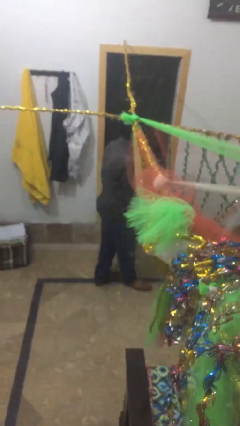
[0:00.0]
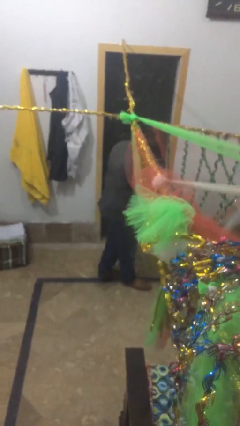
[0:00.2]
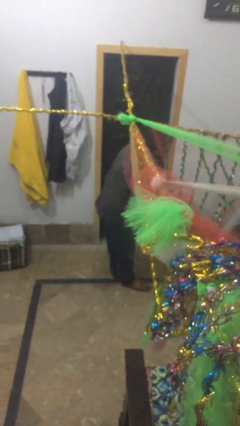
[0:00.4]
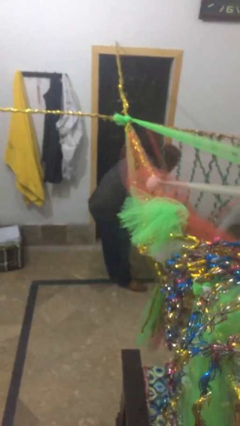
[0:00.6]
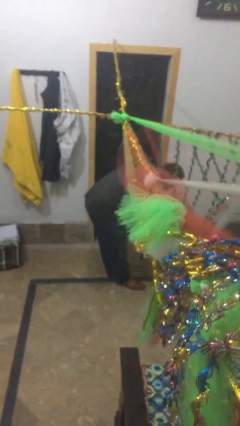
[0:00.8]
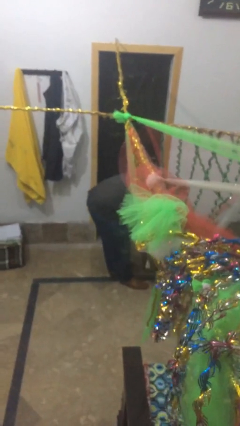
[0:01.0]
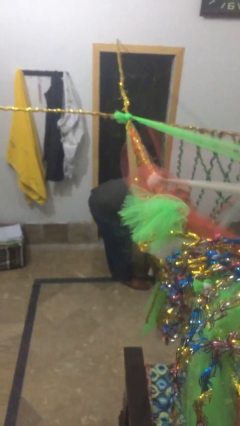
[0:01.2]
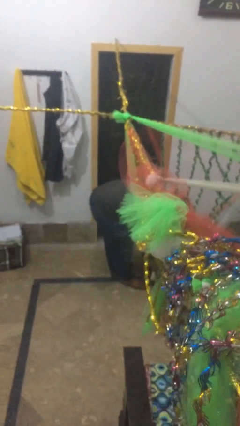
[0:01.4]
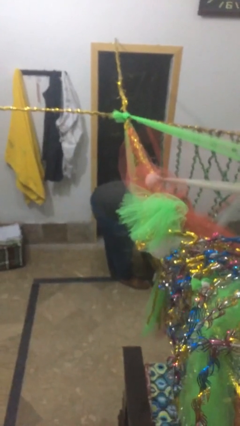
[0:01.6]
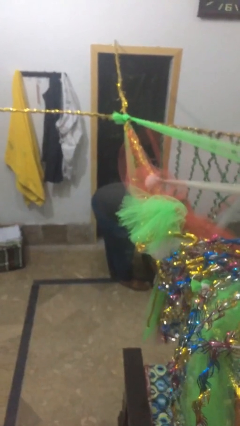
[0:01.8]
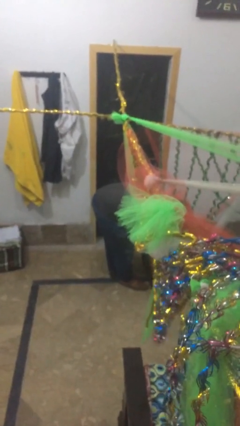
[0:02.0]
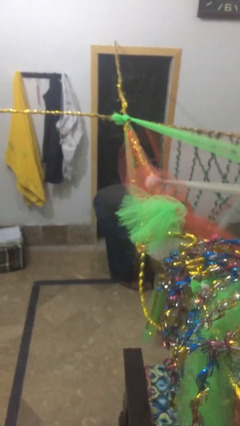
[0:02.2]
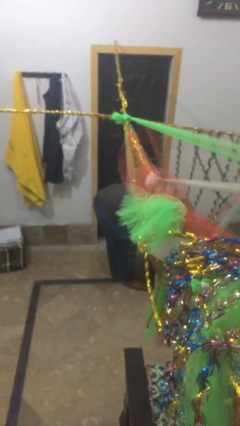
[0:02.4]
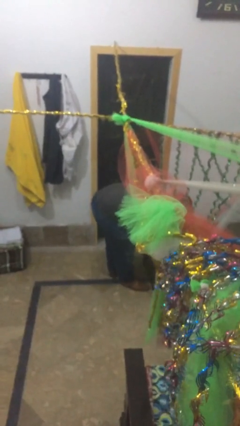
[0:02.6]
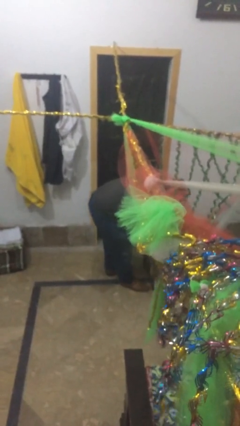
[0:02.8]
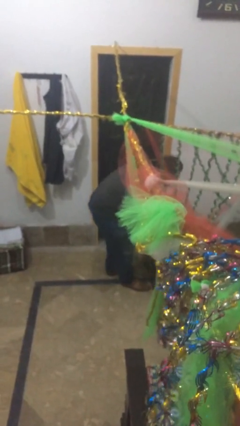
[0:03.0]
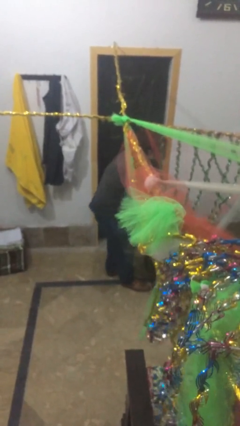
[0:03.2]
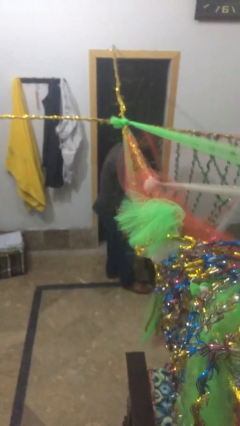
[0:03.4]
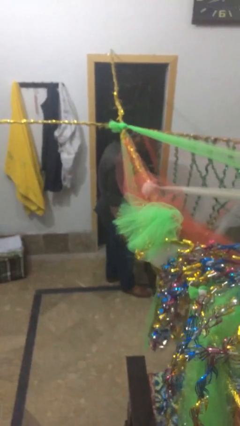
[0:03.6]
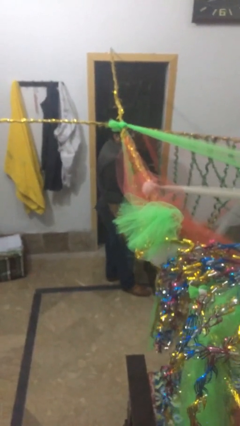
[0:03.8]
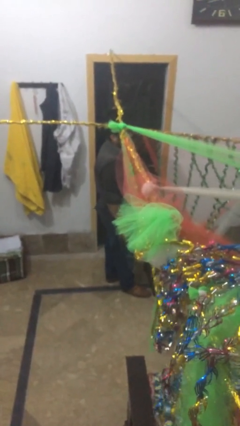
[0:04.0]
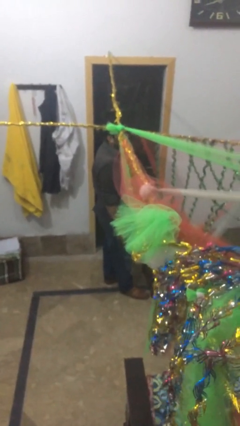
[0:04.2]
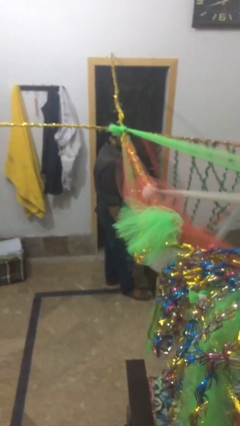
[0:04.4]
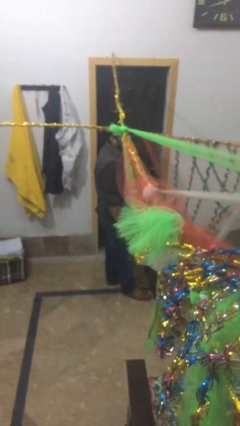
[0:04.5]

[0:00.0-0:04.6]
person puts down object on floor

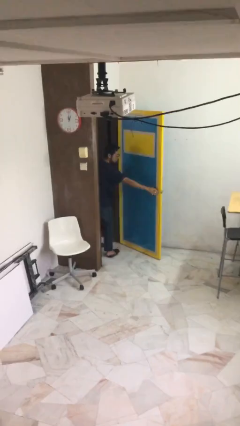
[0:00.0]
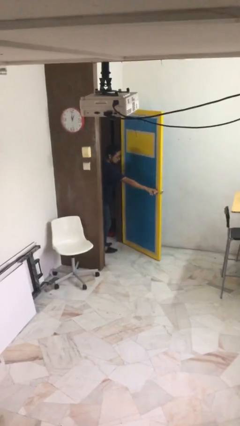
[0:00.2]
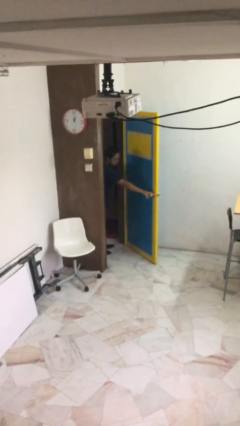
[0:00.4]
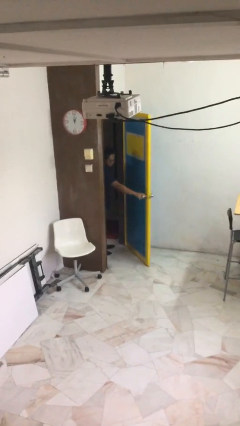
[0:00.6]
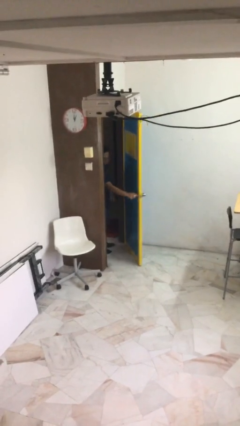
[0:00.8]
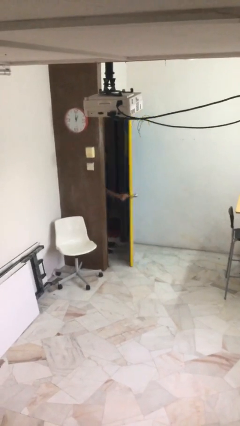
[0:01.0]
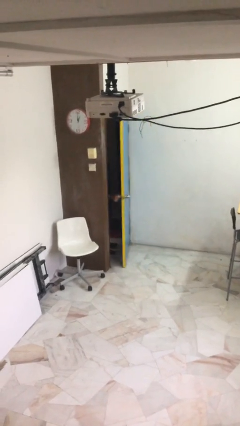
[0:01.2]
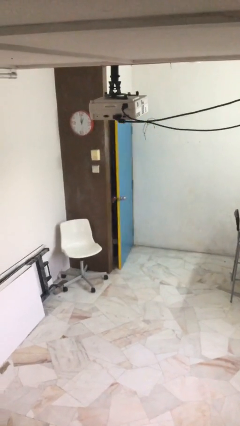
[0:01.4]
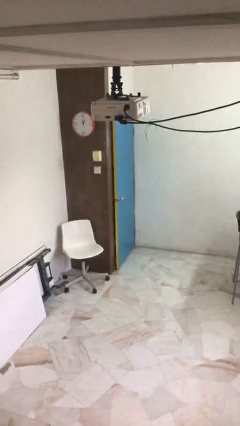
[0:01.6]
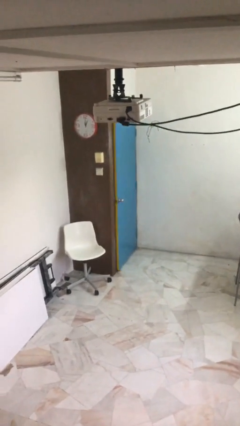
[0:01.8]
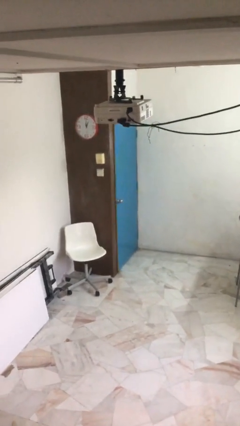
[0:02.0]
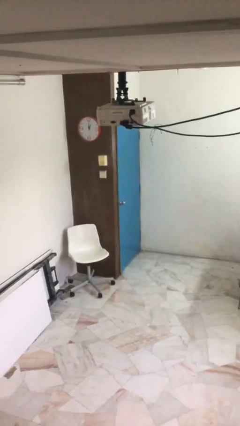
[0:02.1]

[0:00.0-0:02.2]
person closes facility door

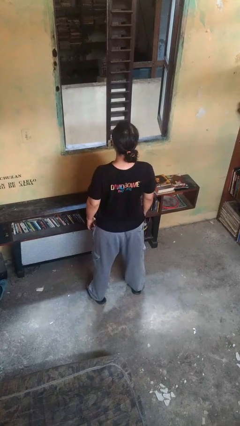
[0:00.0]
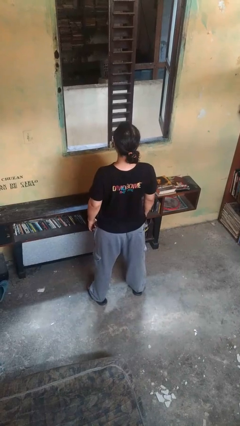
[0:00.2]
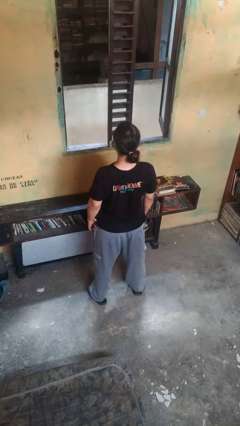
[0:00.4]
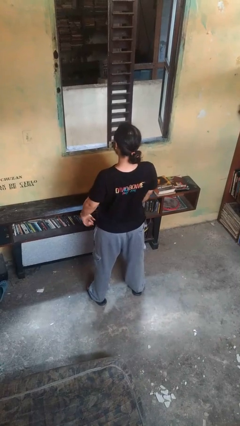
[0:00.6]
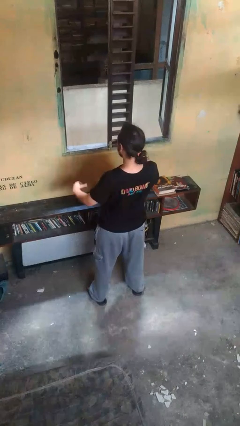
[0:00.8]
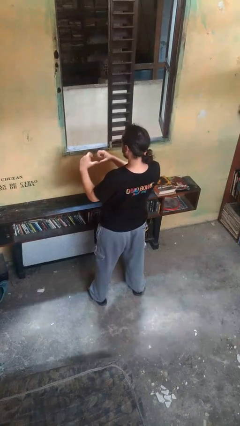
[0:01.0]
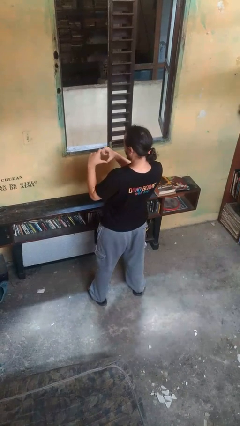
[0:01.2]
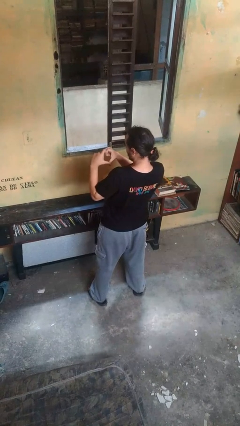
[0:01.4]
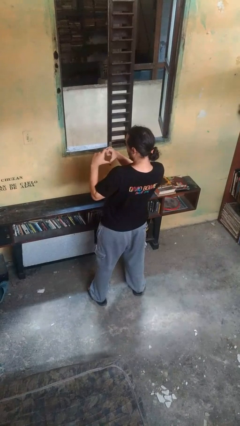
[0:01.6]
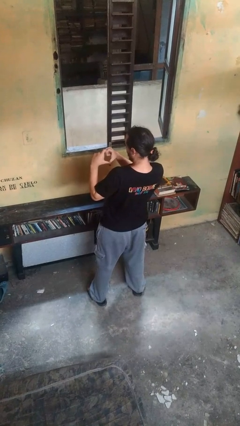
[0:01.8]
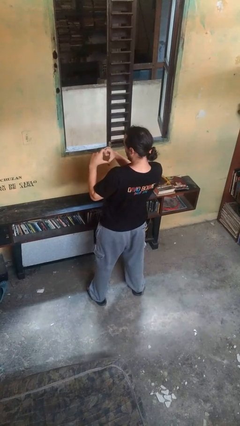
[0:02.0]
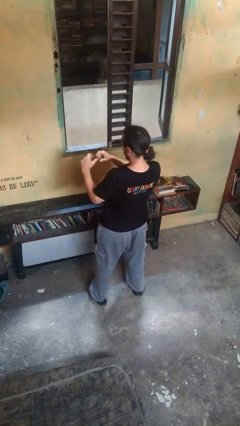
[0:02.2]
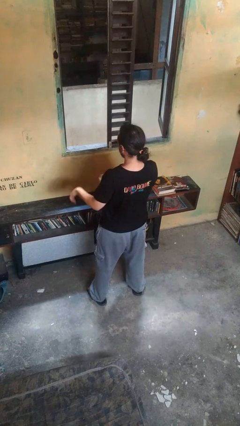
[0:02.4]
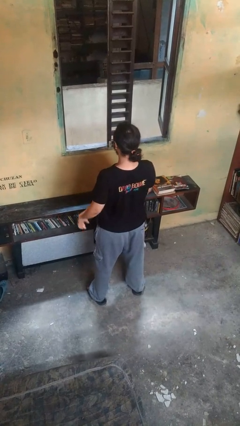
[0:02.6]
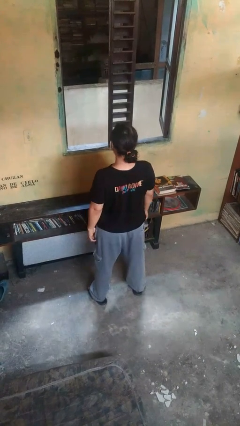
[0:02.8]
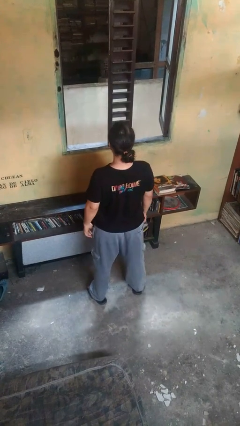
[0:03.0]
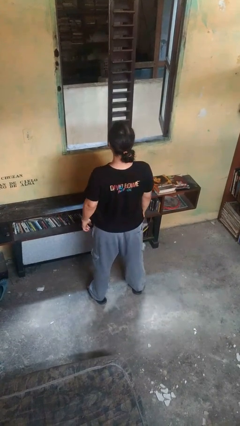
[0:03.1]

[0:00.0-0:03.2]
person gestures heart

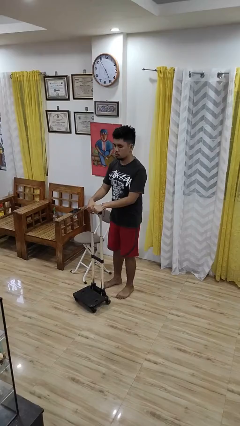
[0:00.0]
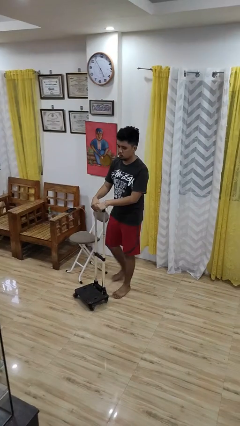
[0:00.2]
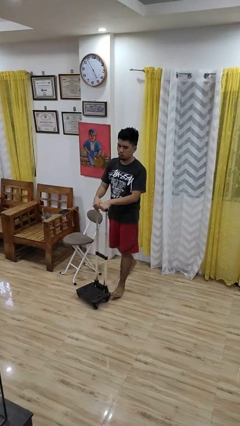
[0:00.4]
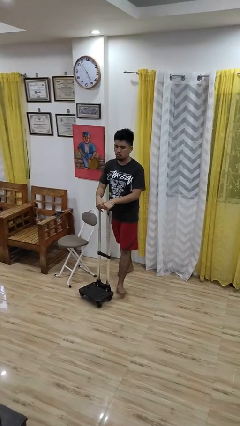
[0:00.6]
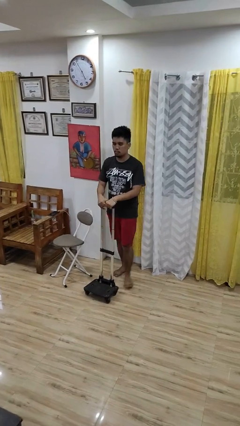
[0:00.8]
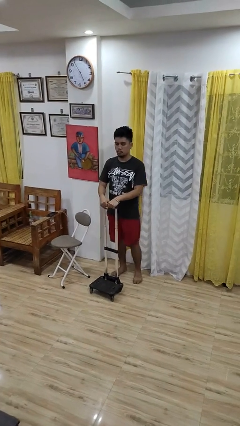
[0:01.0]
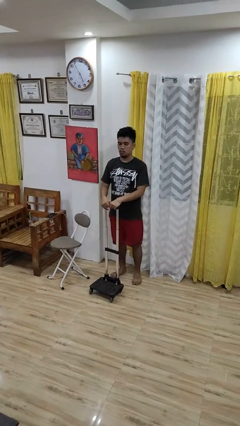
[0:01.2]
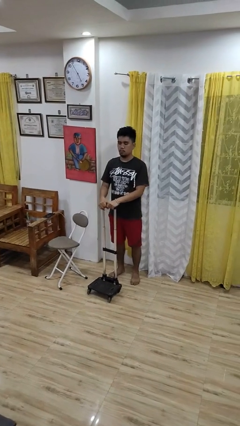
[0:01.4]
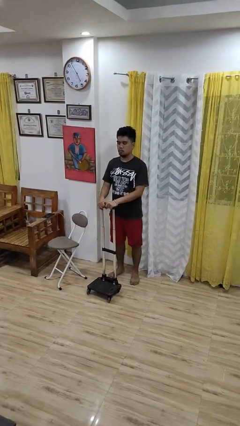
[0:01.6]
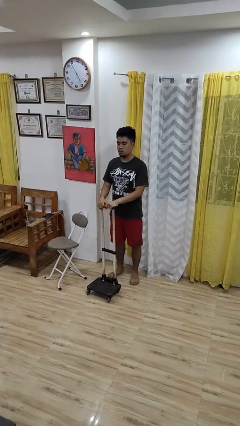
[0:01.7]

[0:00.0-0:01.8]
person pulls wheeled cart

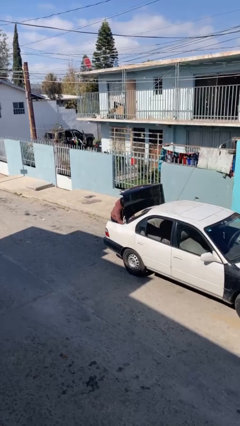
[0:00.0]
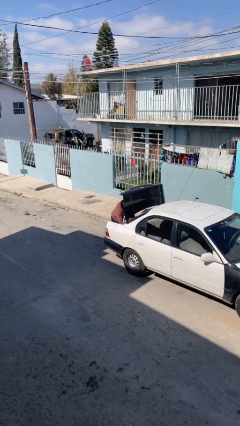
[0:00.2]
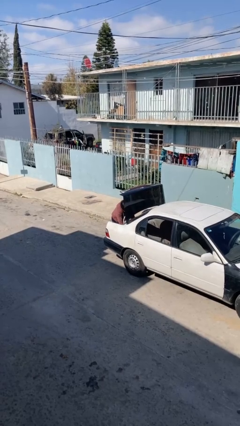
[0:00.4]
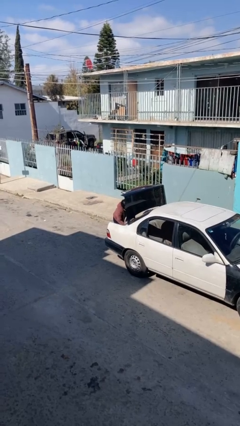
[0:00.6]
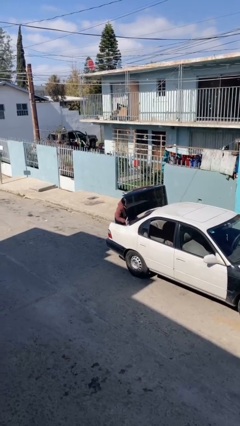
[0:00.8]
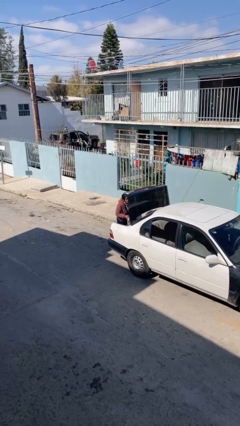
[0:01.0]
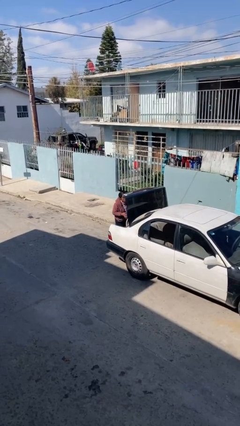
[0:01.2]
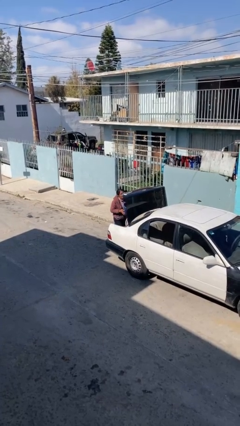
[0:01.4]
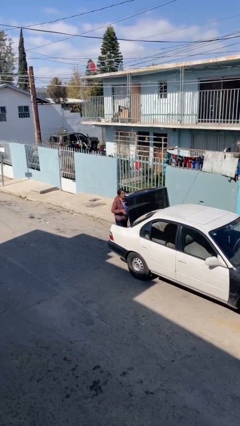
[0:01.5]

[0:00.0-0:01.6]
person unloads car

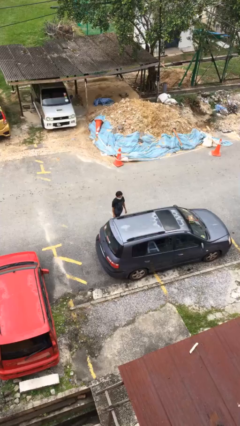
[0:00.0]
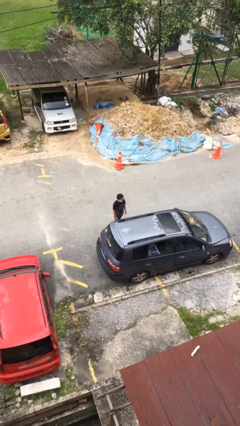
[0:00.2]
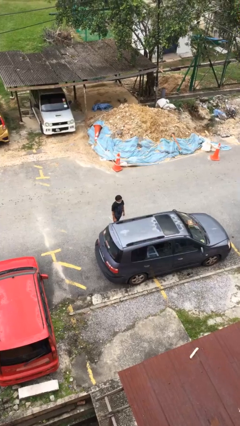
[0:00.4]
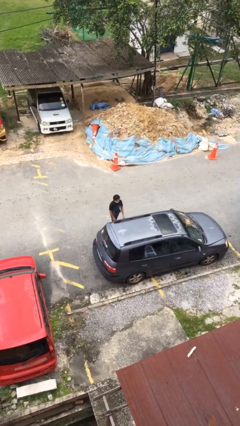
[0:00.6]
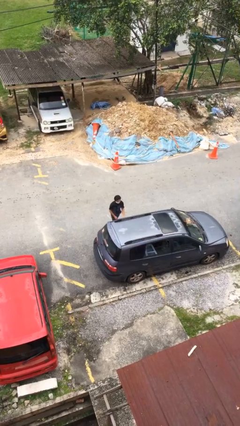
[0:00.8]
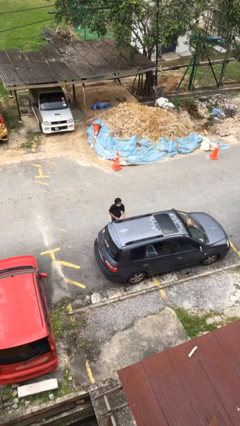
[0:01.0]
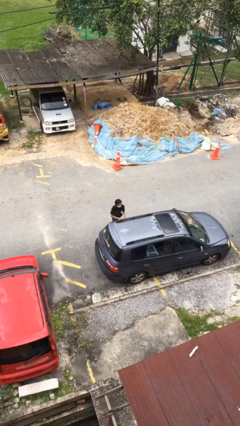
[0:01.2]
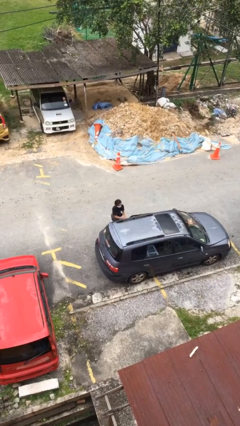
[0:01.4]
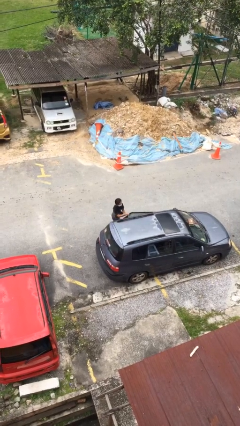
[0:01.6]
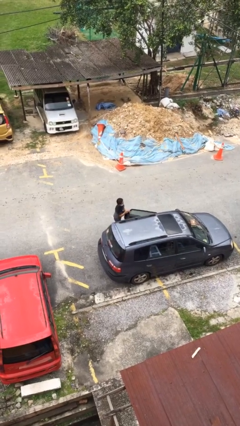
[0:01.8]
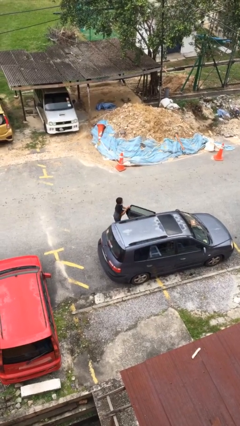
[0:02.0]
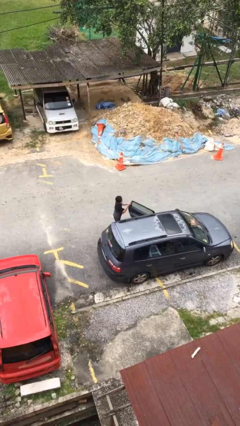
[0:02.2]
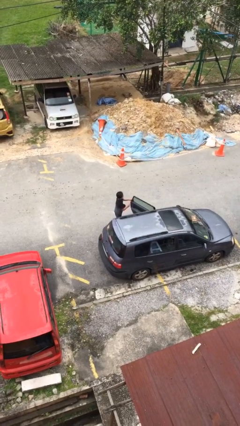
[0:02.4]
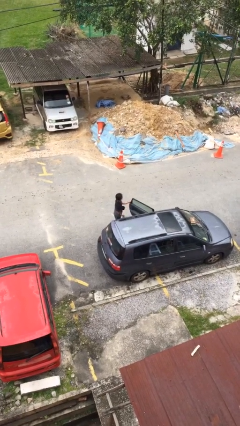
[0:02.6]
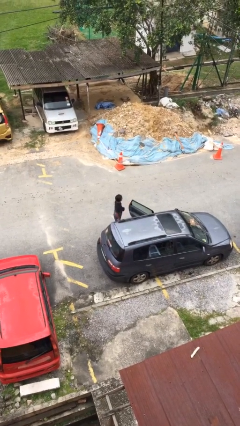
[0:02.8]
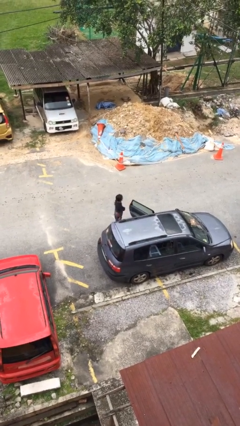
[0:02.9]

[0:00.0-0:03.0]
person opens car door

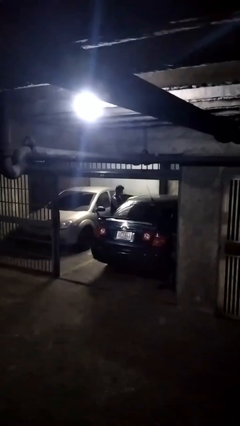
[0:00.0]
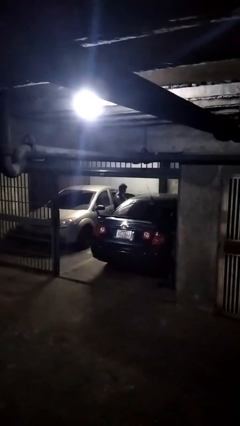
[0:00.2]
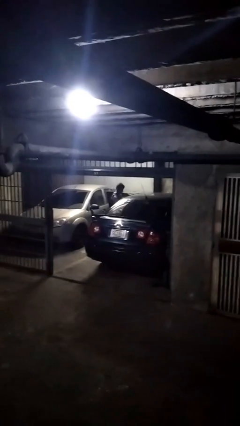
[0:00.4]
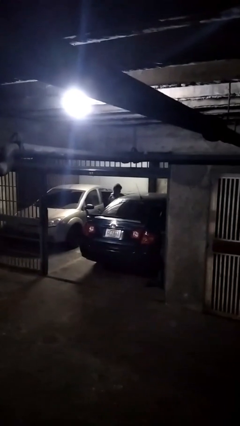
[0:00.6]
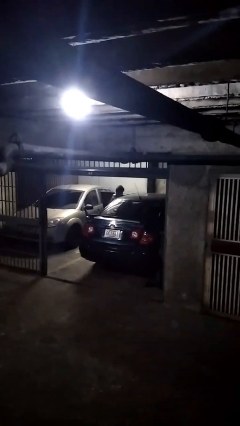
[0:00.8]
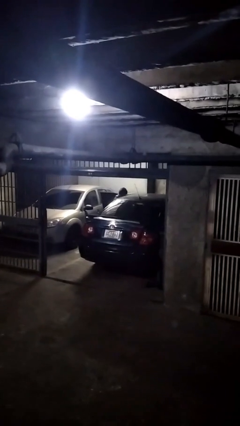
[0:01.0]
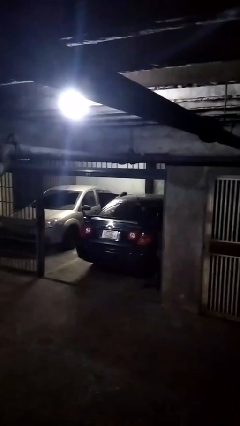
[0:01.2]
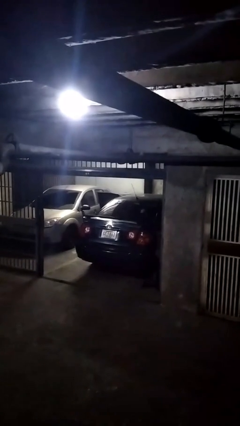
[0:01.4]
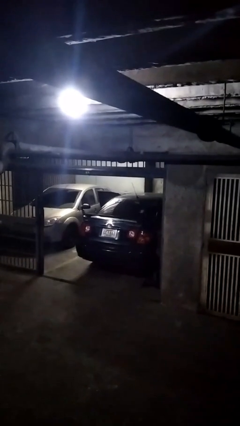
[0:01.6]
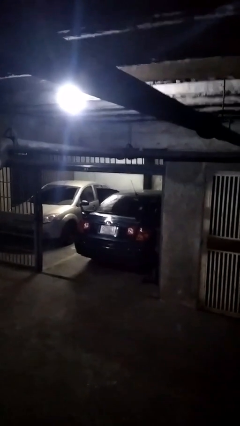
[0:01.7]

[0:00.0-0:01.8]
person loads car
